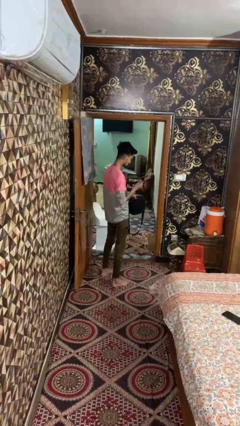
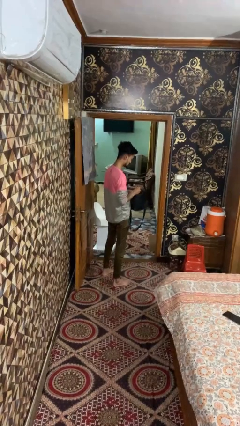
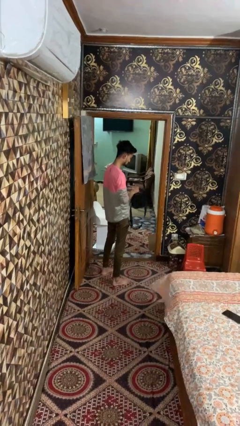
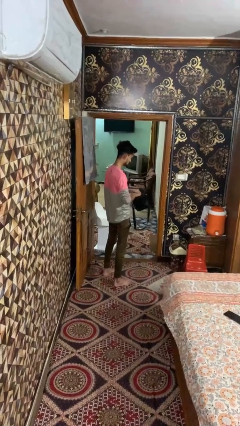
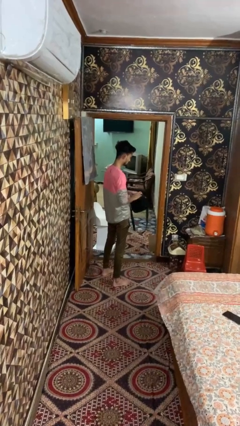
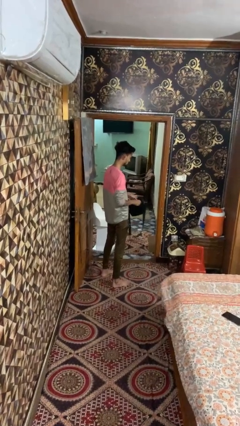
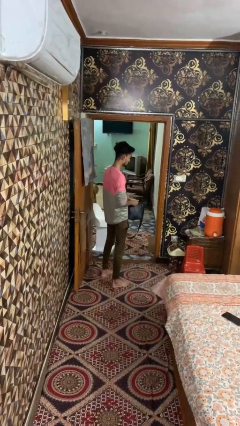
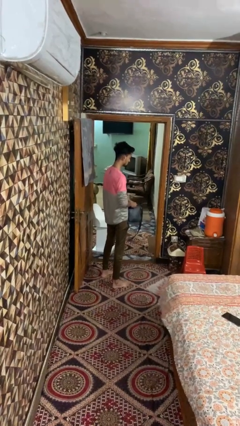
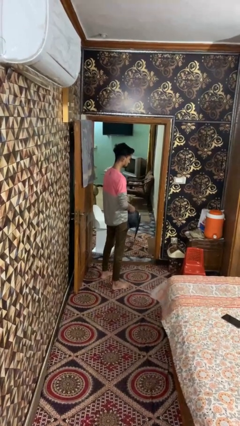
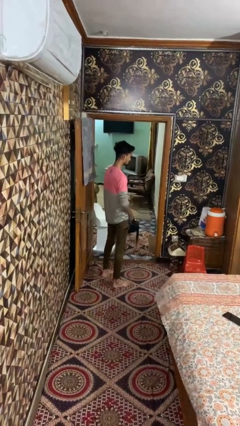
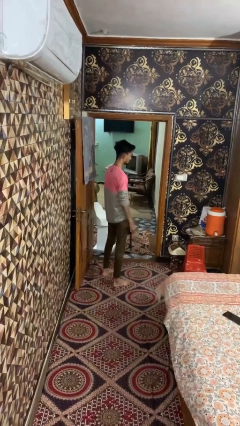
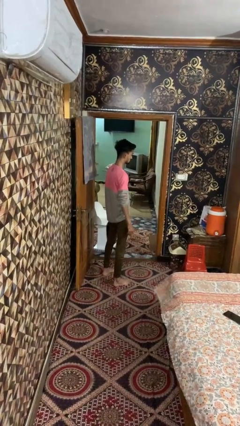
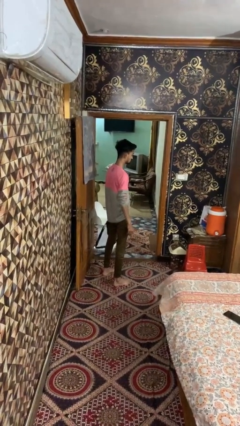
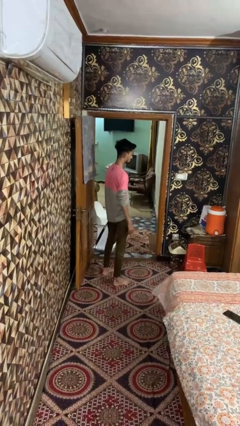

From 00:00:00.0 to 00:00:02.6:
person puts object into bag

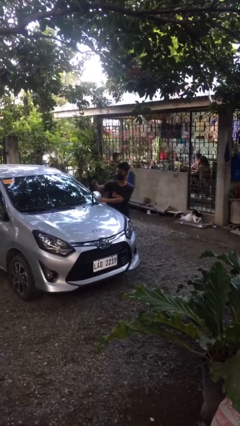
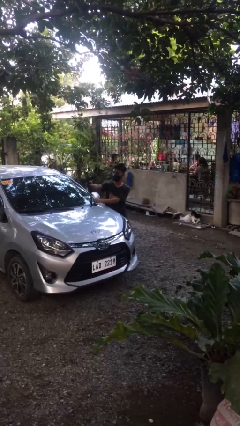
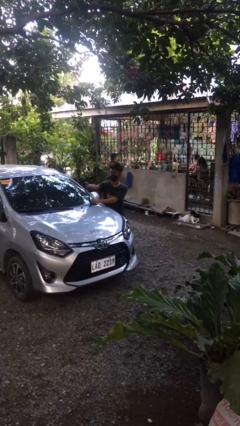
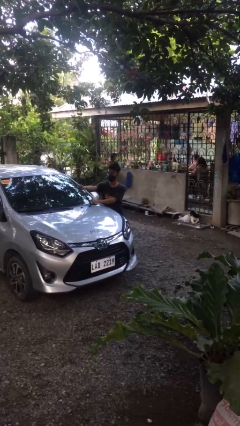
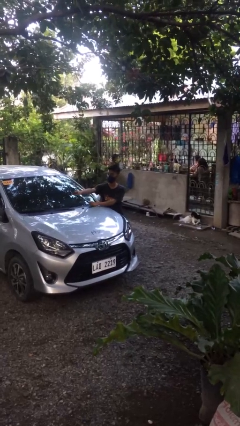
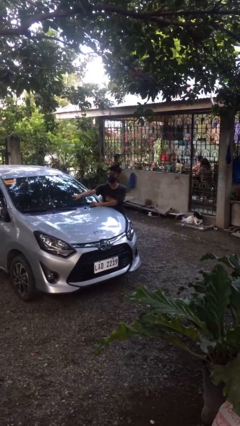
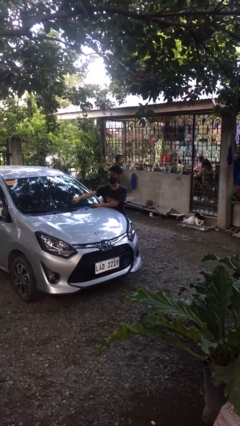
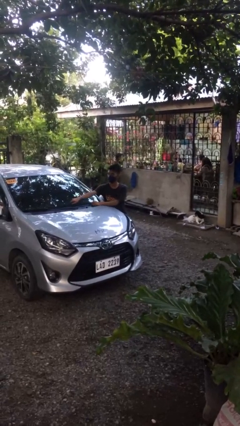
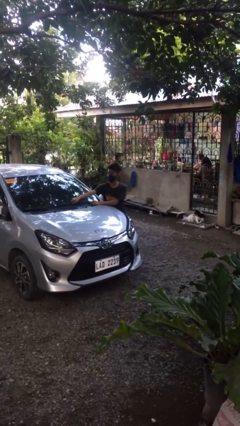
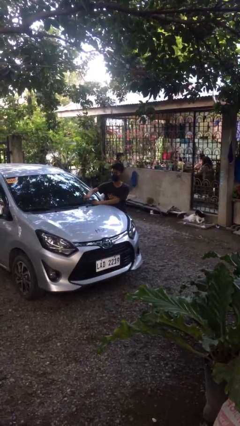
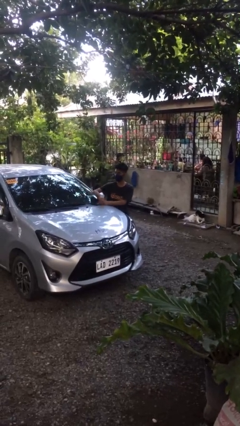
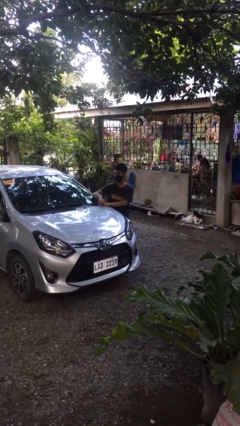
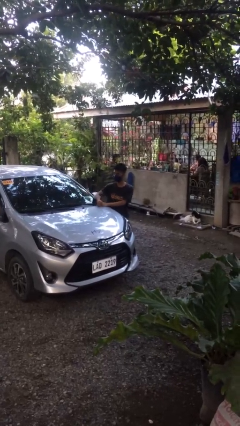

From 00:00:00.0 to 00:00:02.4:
person flips down car wipers

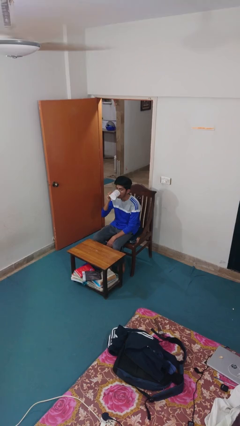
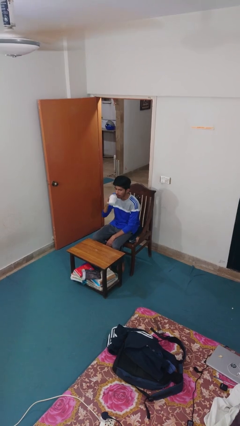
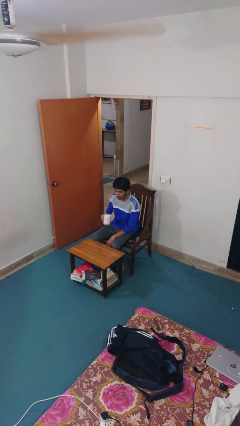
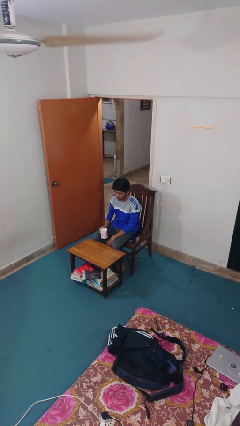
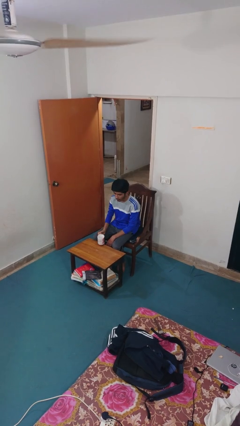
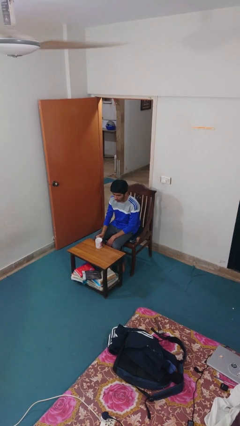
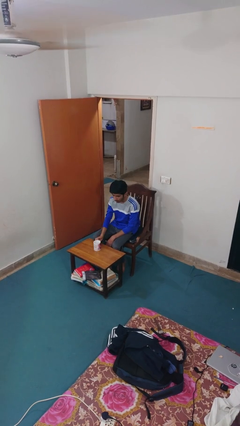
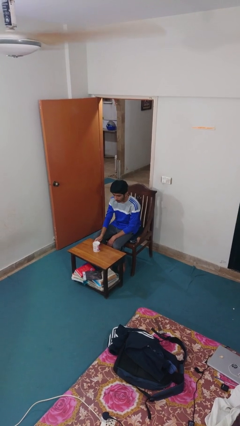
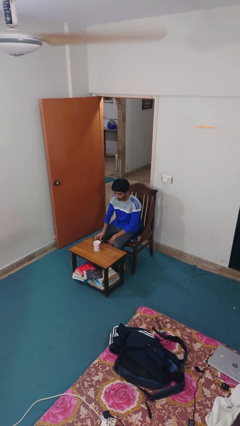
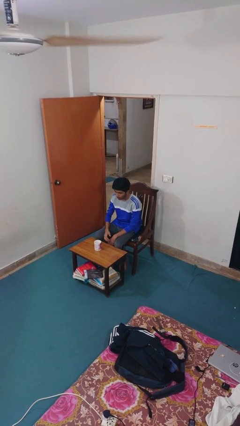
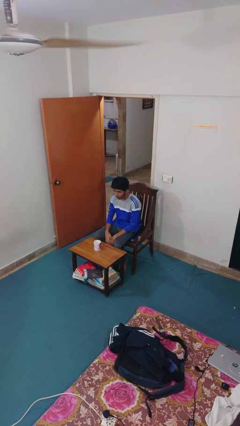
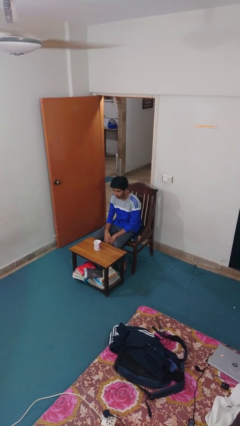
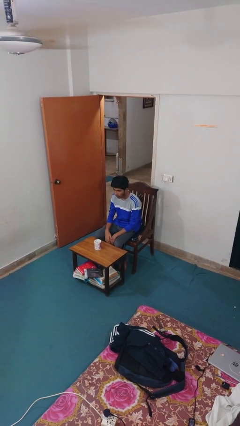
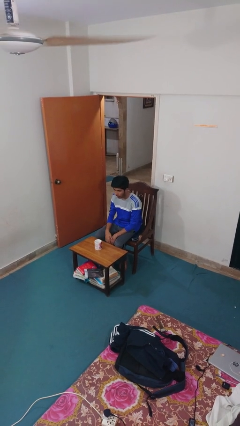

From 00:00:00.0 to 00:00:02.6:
person puts down object on table

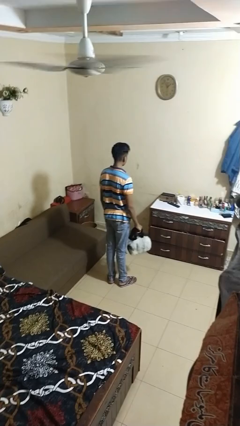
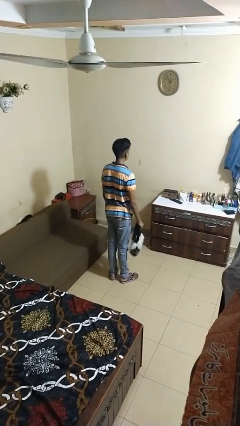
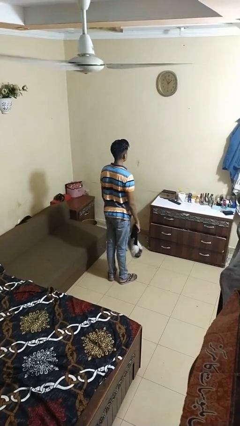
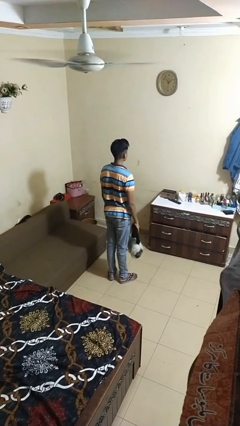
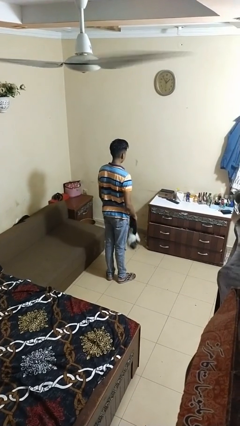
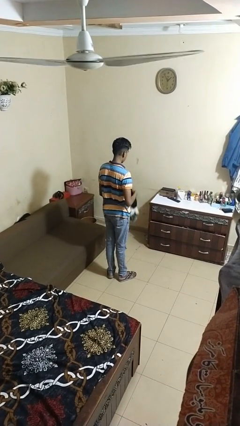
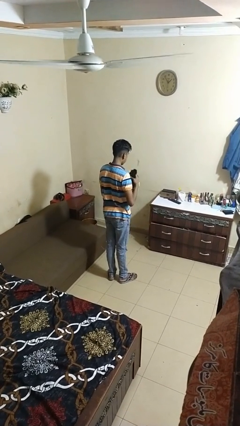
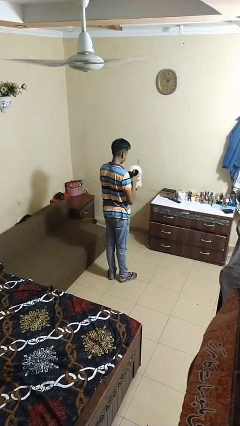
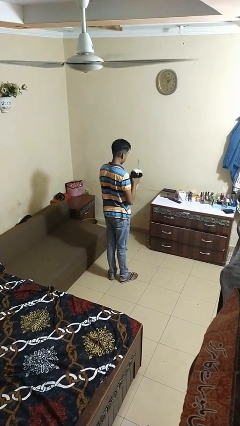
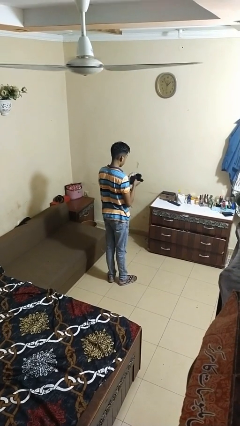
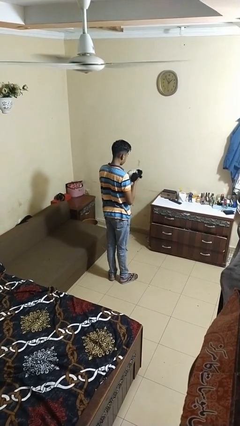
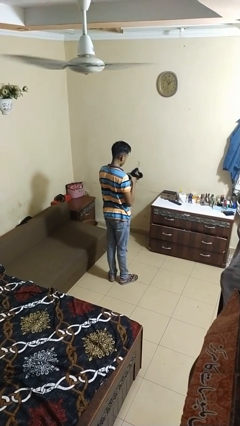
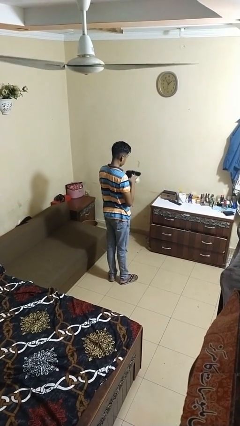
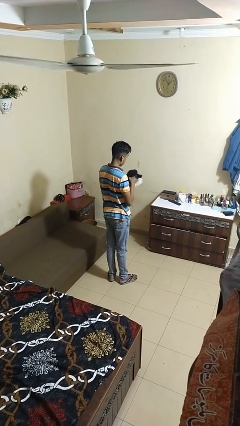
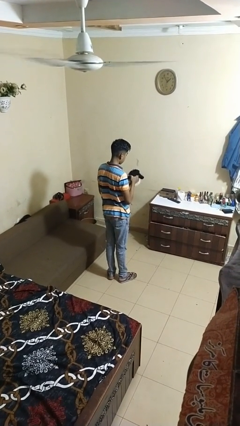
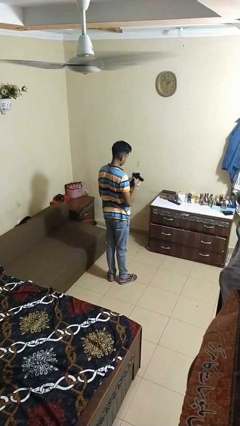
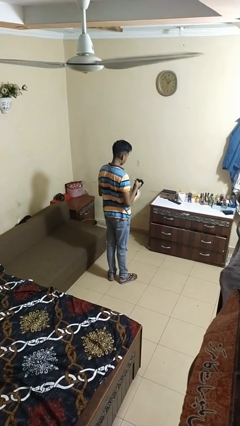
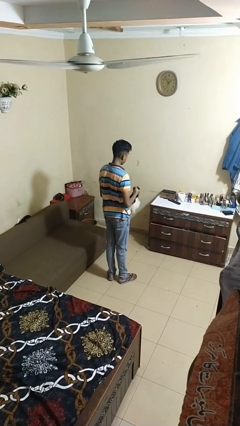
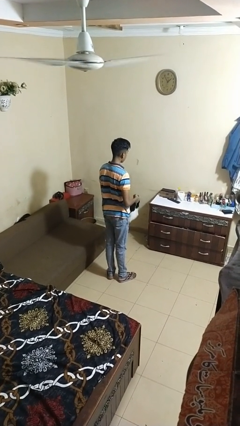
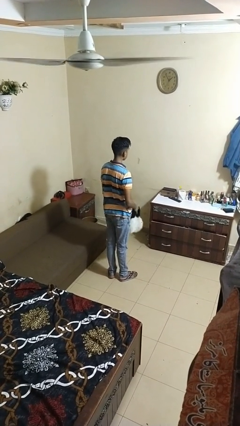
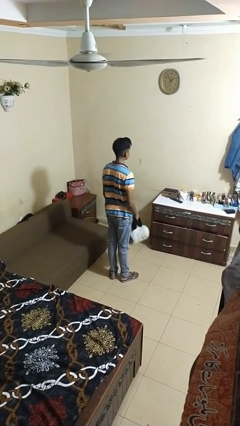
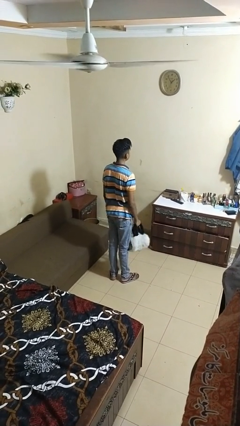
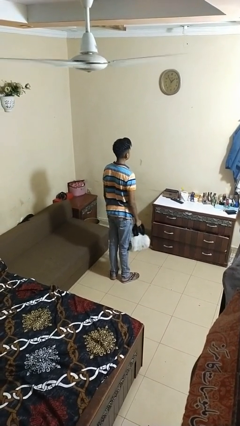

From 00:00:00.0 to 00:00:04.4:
person squeezes object

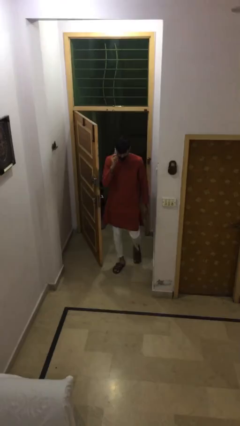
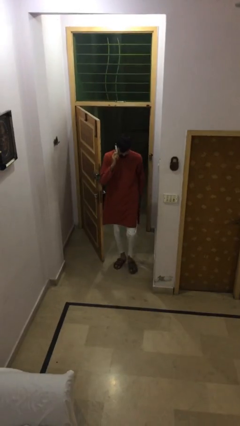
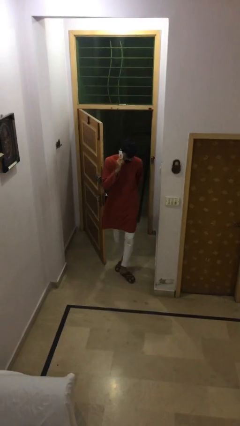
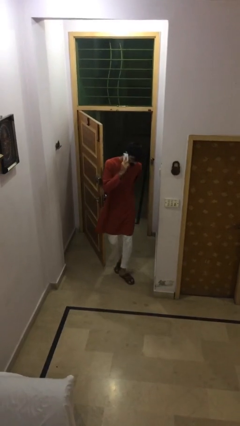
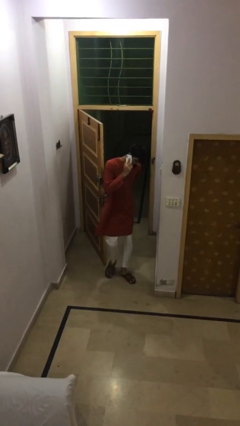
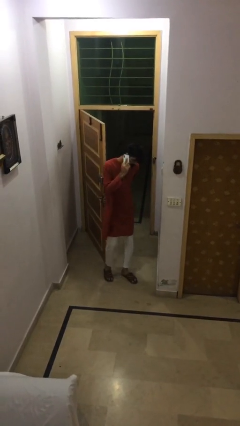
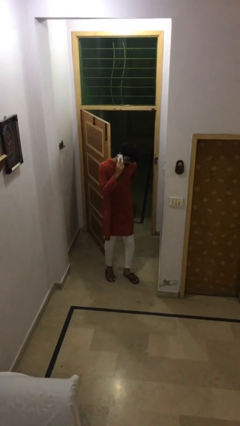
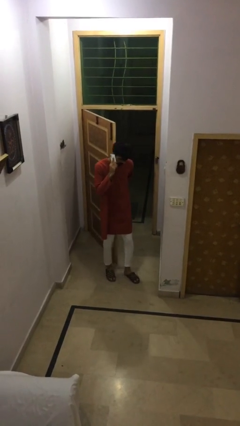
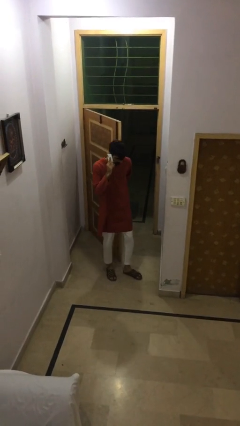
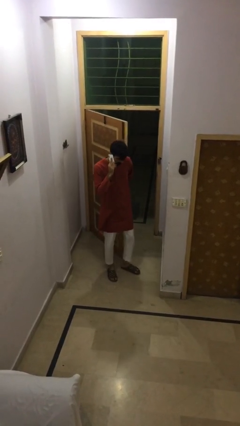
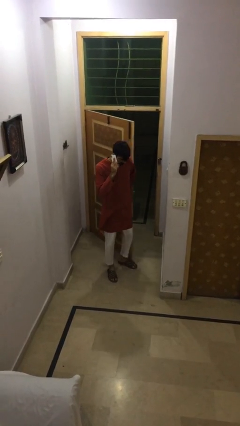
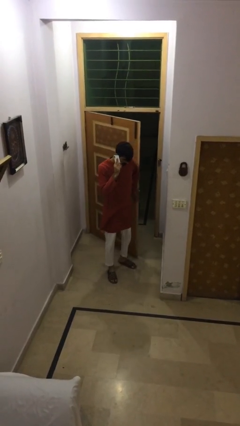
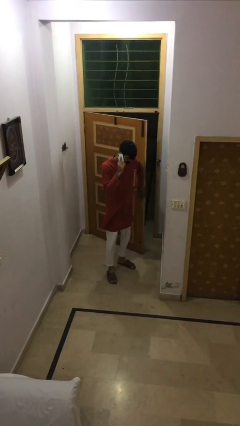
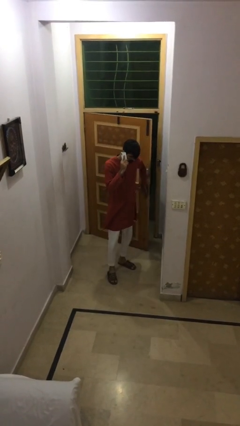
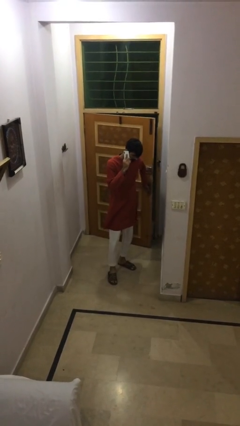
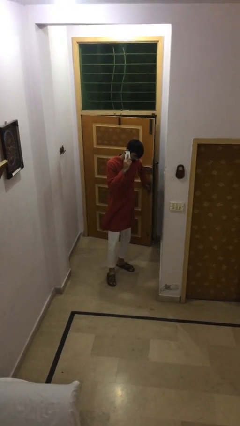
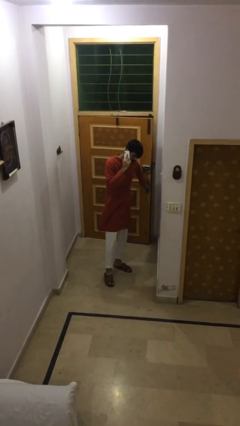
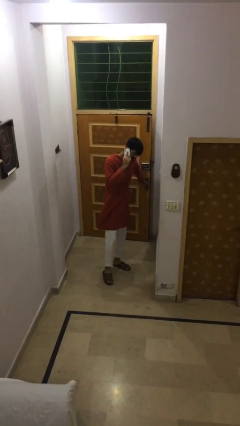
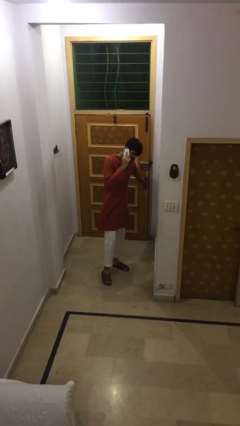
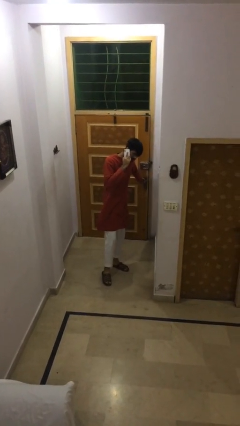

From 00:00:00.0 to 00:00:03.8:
person closes facility door

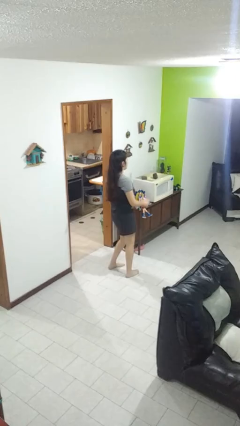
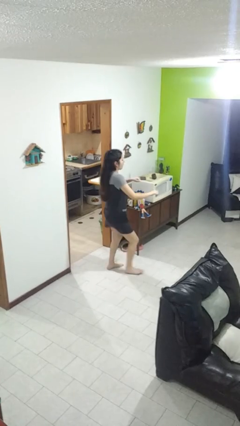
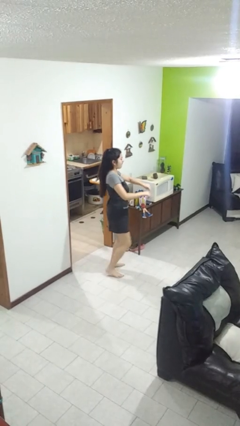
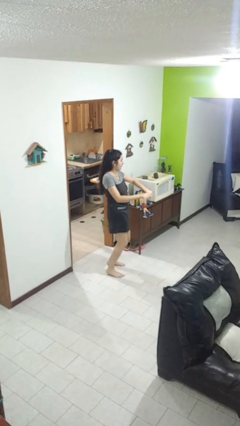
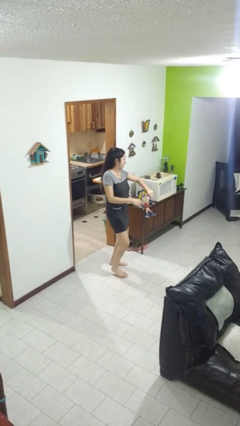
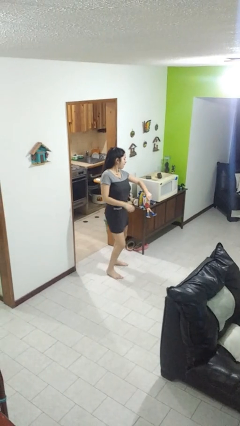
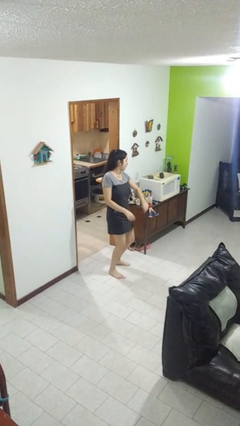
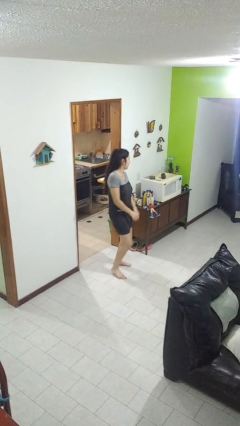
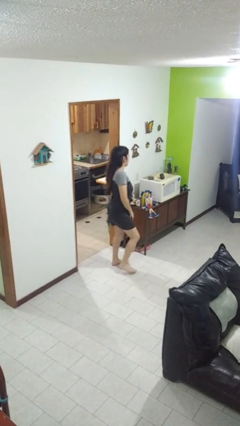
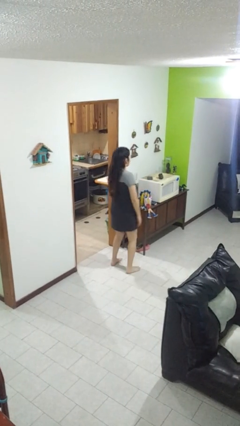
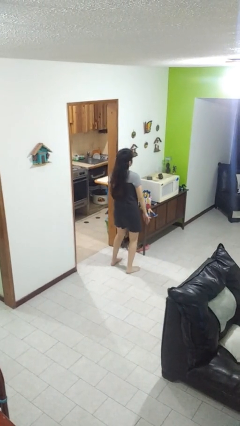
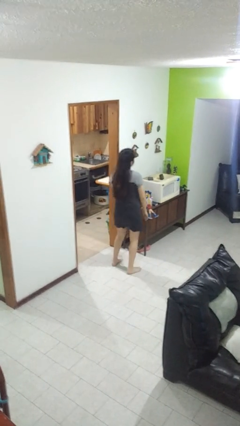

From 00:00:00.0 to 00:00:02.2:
person dances in place
